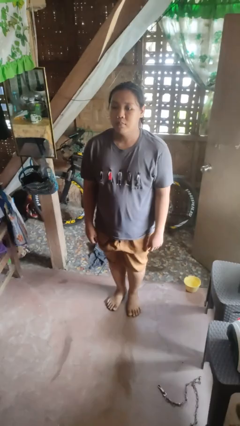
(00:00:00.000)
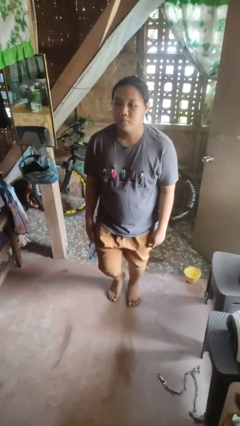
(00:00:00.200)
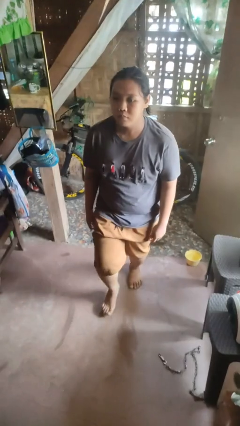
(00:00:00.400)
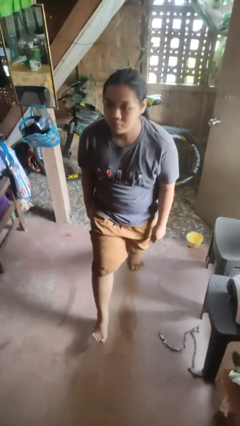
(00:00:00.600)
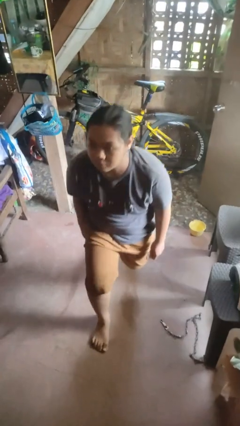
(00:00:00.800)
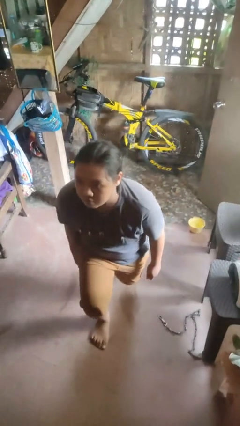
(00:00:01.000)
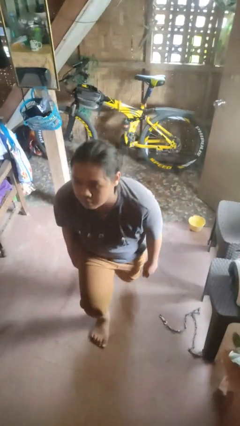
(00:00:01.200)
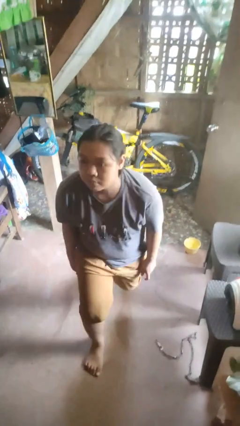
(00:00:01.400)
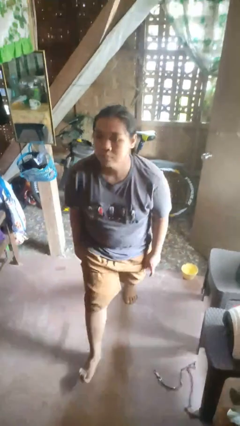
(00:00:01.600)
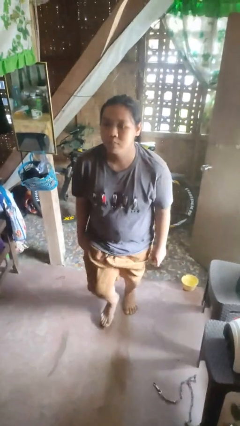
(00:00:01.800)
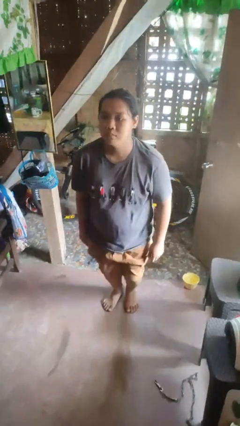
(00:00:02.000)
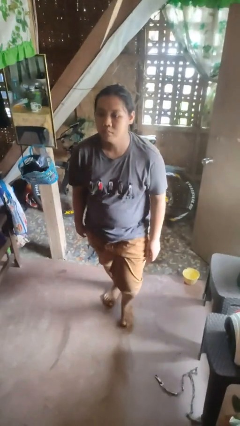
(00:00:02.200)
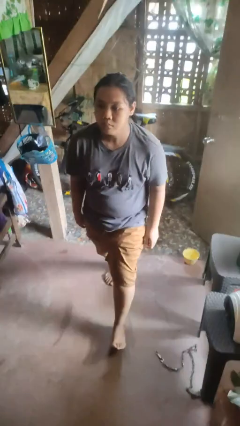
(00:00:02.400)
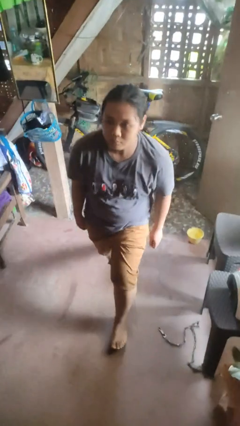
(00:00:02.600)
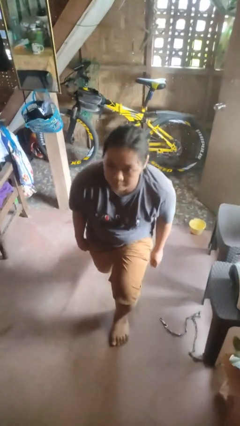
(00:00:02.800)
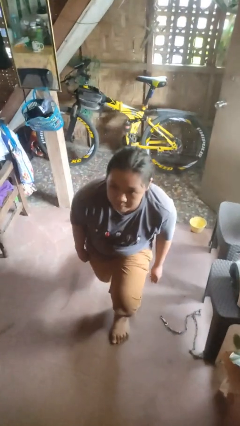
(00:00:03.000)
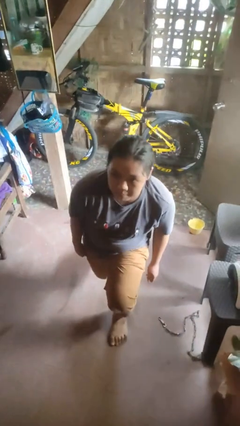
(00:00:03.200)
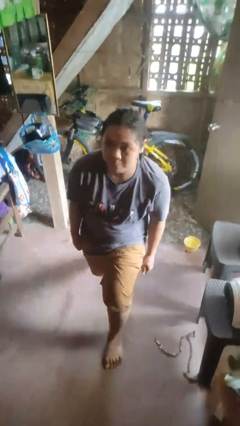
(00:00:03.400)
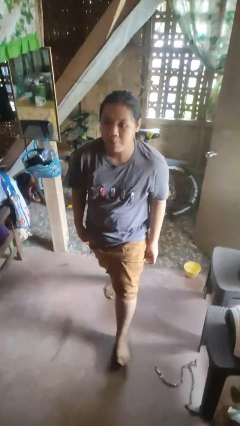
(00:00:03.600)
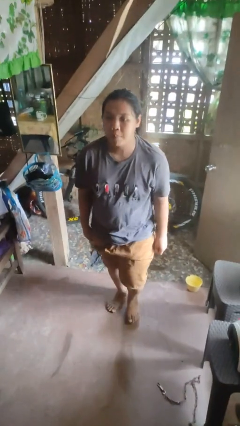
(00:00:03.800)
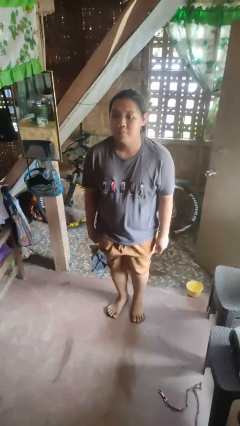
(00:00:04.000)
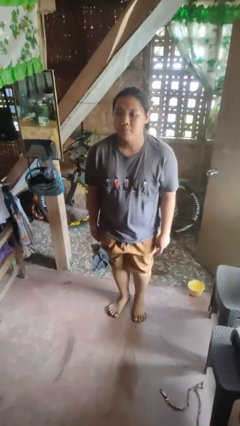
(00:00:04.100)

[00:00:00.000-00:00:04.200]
person exercises with lunges

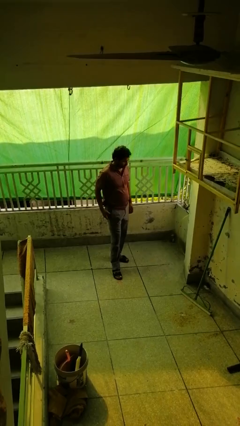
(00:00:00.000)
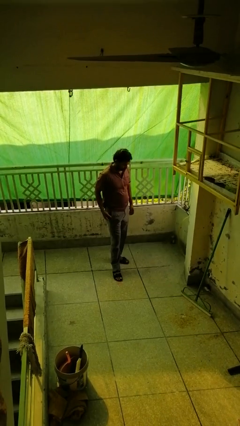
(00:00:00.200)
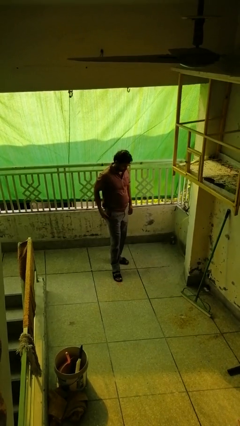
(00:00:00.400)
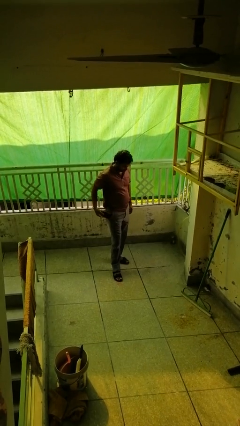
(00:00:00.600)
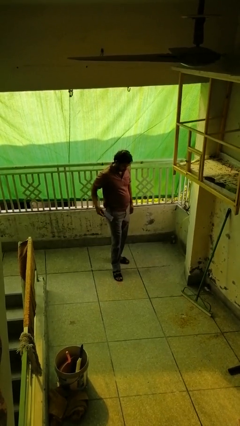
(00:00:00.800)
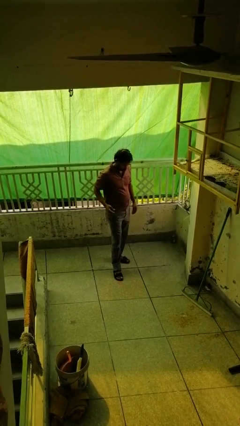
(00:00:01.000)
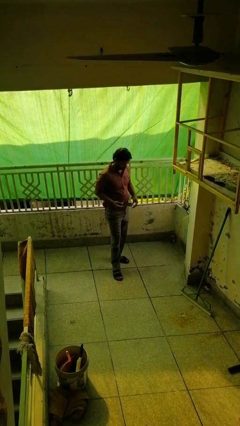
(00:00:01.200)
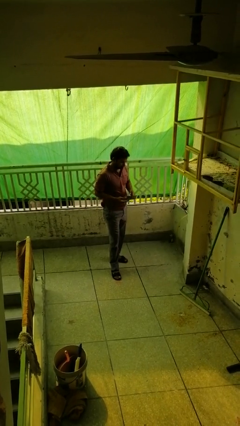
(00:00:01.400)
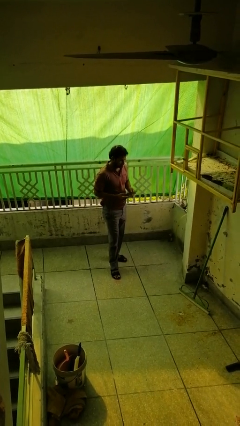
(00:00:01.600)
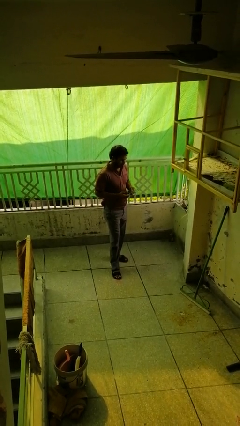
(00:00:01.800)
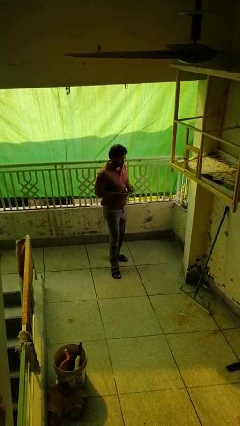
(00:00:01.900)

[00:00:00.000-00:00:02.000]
person takes phone from pocket

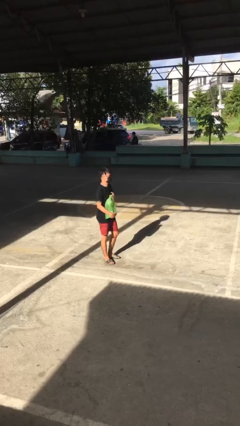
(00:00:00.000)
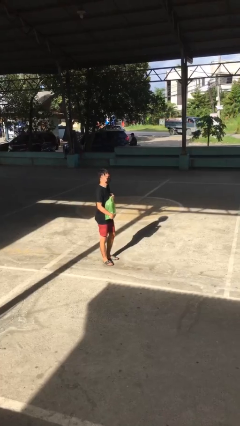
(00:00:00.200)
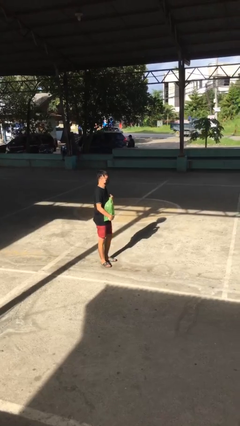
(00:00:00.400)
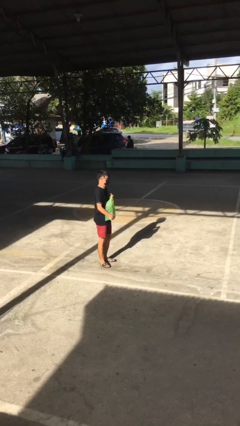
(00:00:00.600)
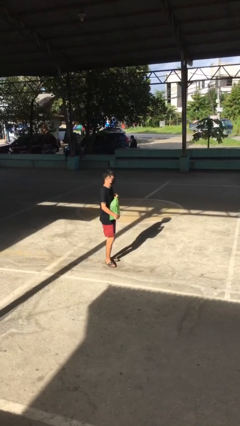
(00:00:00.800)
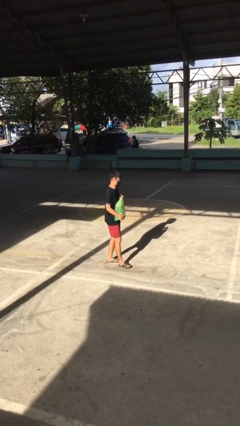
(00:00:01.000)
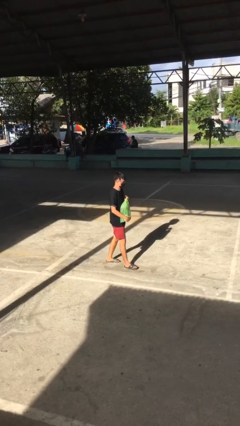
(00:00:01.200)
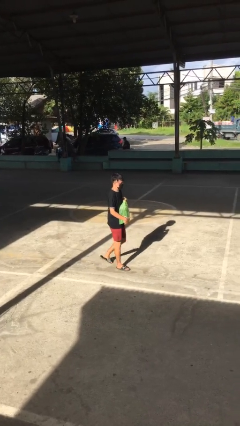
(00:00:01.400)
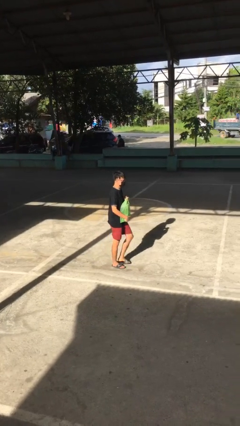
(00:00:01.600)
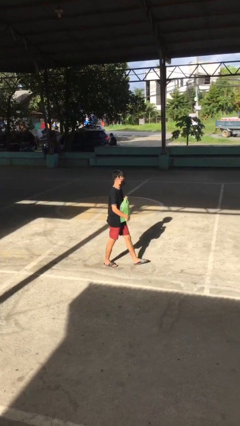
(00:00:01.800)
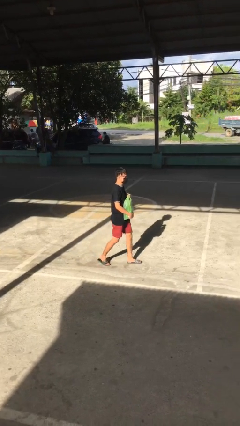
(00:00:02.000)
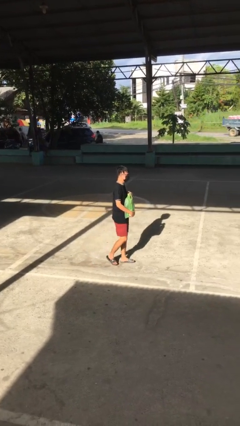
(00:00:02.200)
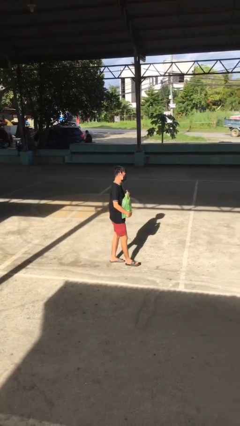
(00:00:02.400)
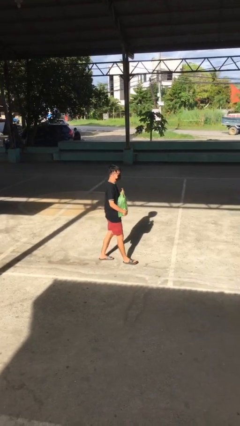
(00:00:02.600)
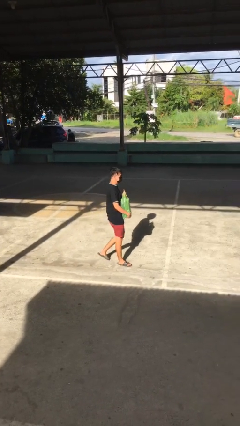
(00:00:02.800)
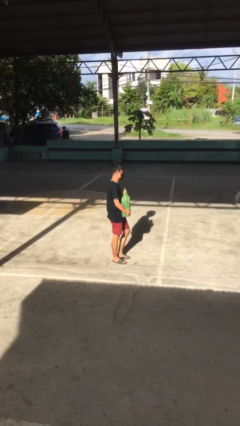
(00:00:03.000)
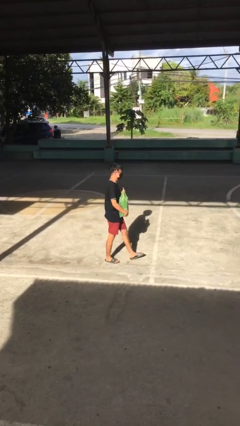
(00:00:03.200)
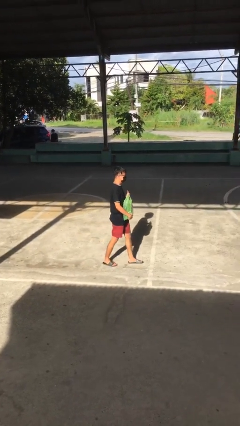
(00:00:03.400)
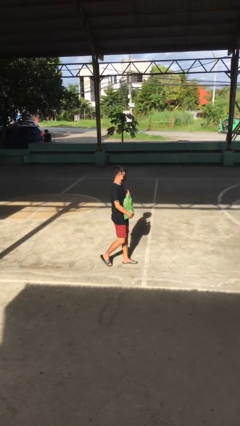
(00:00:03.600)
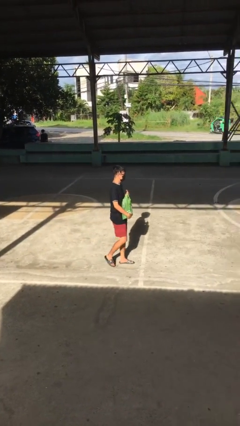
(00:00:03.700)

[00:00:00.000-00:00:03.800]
person carries groceries

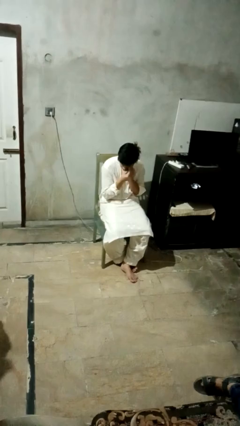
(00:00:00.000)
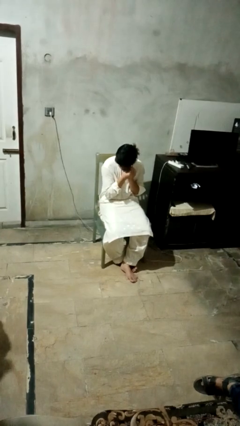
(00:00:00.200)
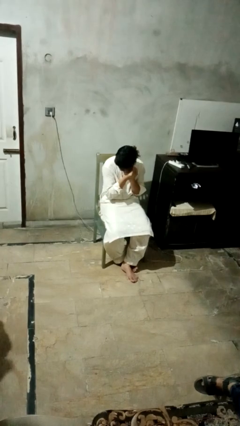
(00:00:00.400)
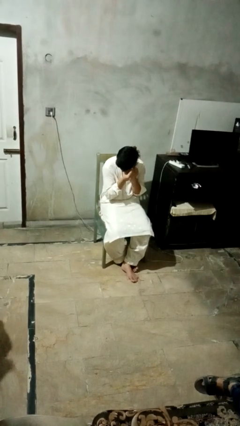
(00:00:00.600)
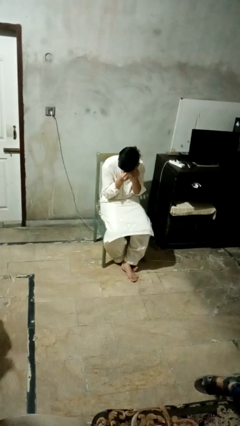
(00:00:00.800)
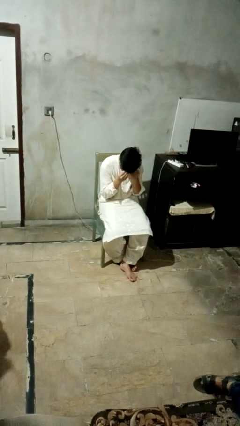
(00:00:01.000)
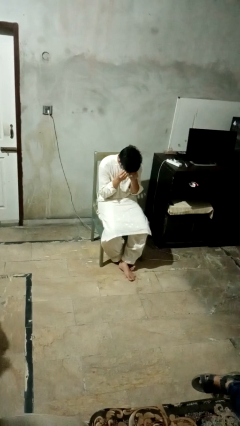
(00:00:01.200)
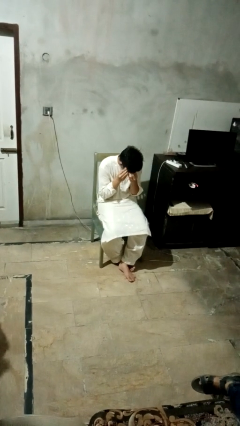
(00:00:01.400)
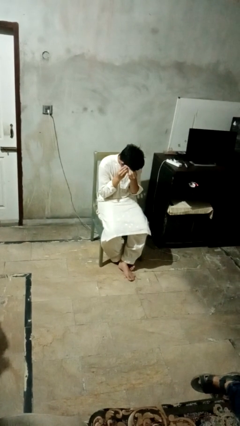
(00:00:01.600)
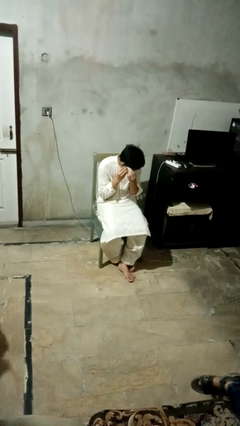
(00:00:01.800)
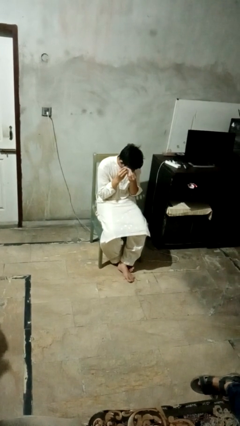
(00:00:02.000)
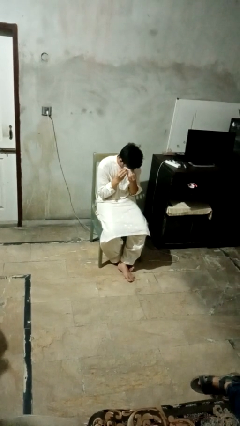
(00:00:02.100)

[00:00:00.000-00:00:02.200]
person wipes mouth with napkin

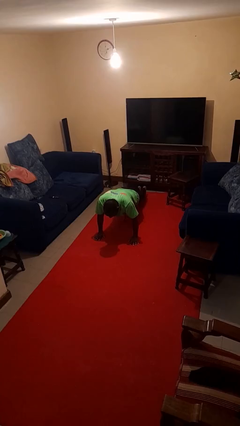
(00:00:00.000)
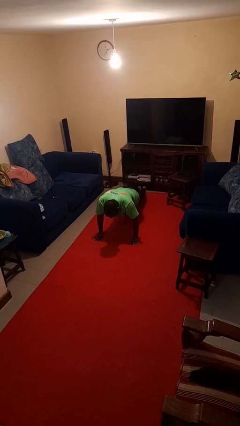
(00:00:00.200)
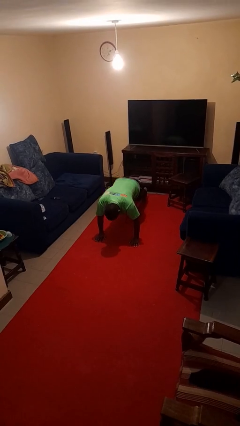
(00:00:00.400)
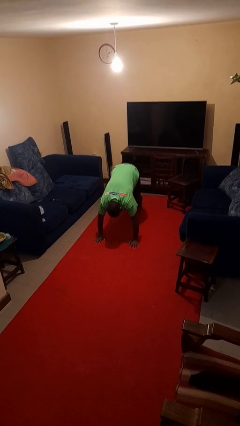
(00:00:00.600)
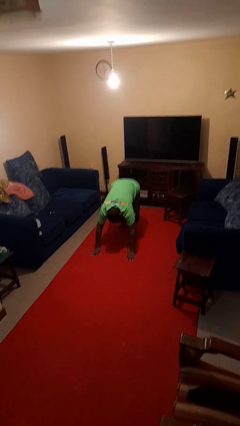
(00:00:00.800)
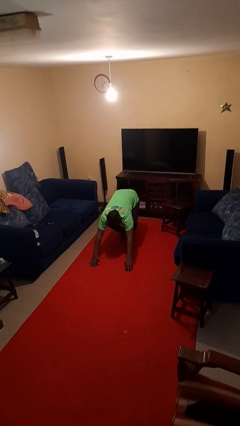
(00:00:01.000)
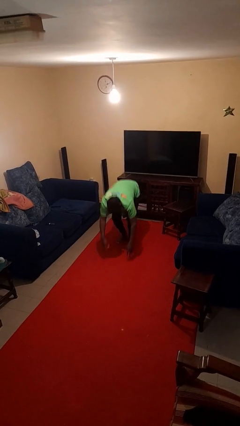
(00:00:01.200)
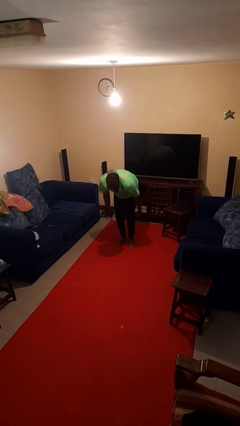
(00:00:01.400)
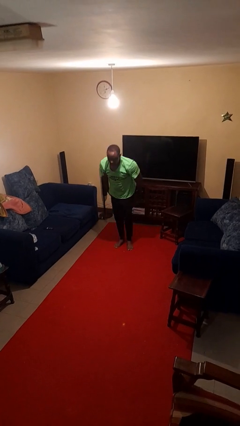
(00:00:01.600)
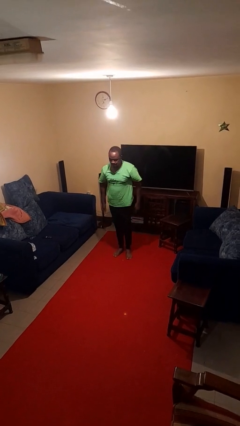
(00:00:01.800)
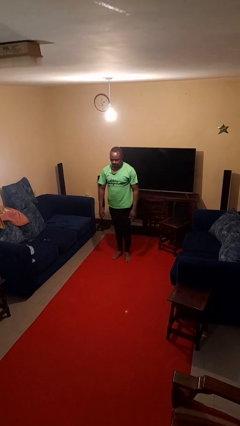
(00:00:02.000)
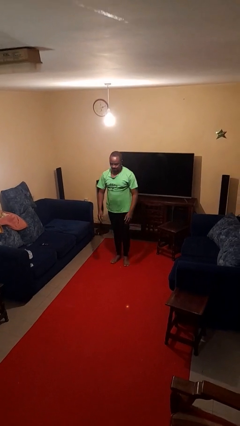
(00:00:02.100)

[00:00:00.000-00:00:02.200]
person stands up from floor

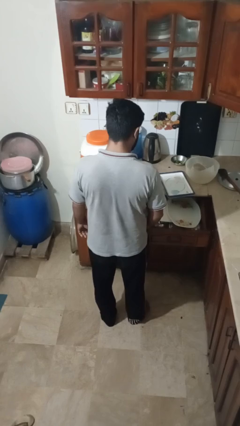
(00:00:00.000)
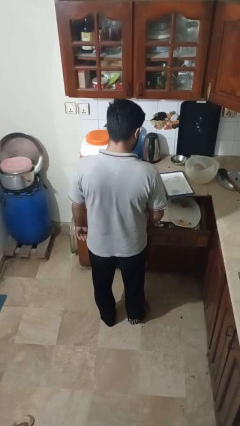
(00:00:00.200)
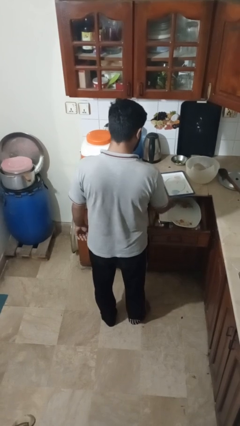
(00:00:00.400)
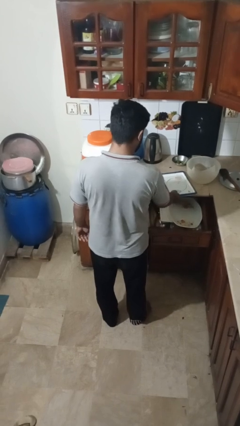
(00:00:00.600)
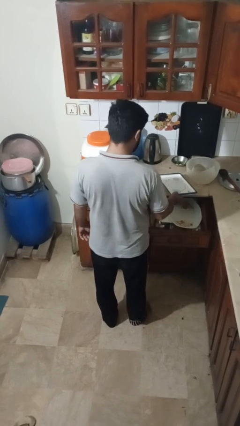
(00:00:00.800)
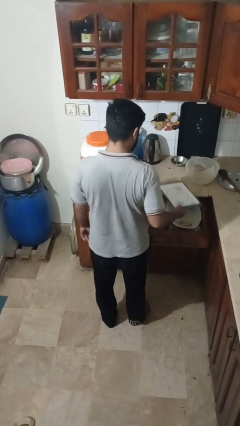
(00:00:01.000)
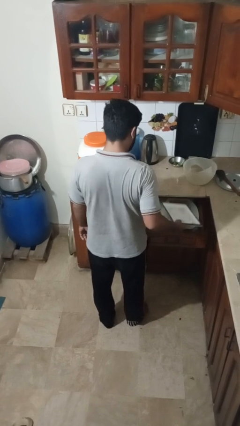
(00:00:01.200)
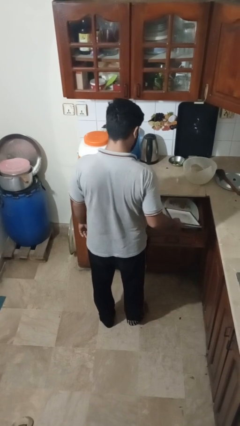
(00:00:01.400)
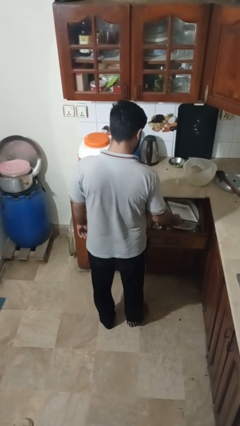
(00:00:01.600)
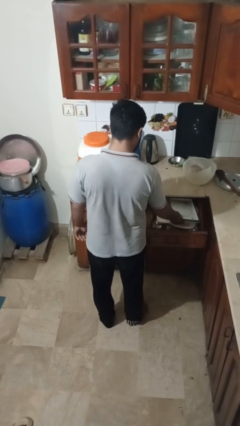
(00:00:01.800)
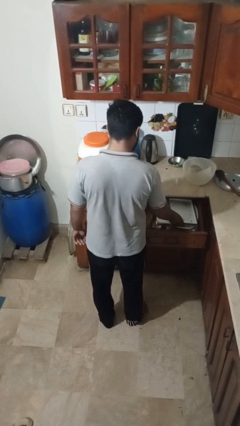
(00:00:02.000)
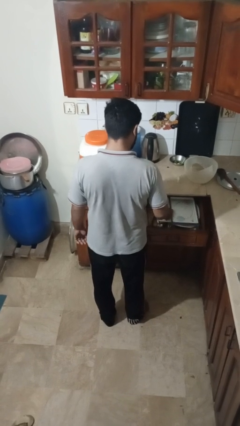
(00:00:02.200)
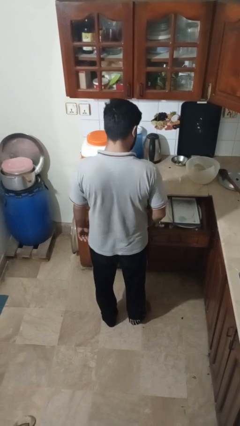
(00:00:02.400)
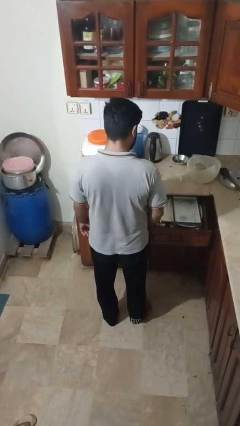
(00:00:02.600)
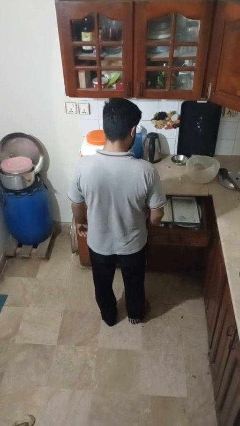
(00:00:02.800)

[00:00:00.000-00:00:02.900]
person puts object into kitchen drawer
